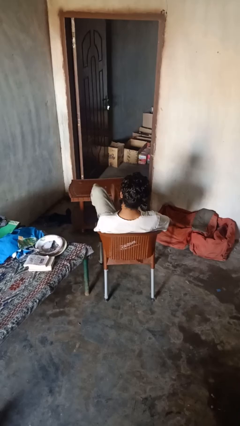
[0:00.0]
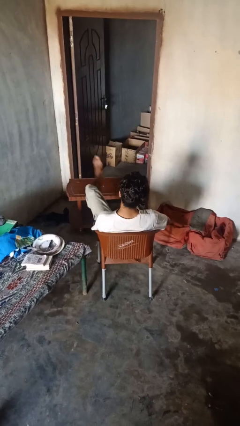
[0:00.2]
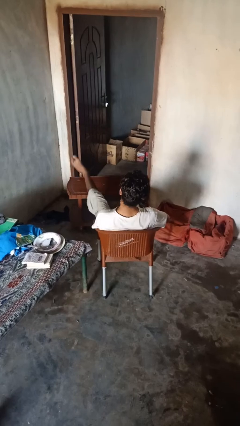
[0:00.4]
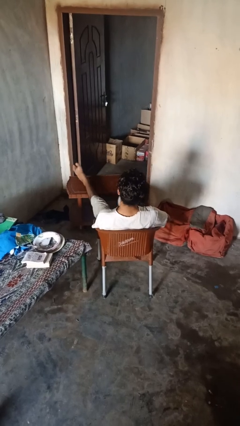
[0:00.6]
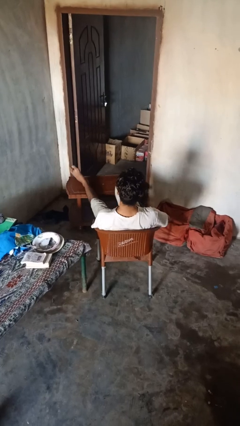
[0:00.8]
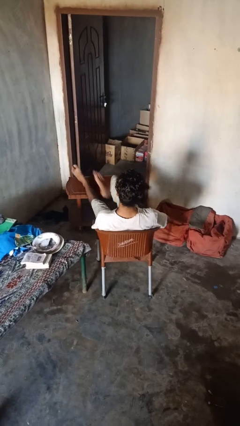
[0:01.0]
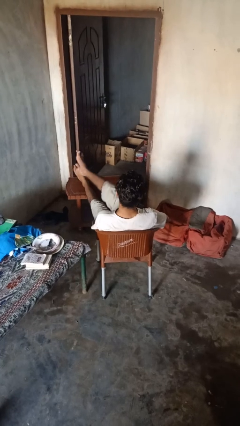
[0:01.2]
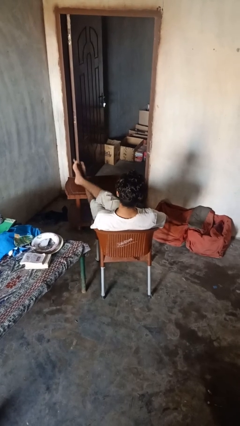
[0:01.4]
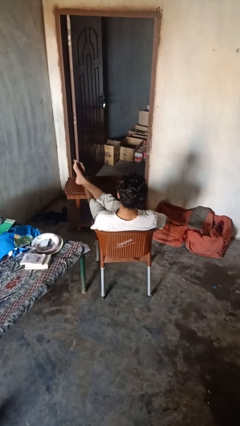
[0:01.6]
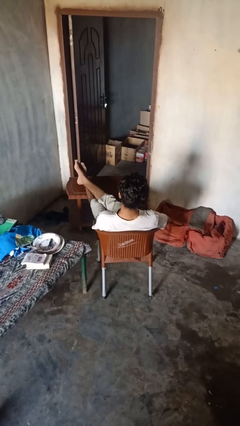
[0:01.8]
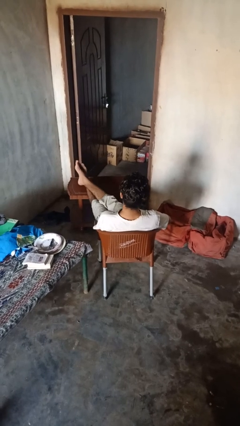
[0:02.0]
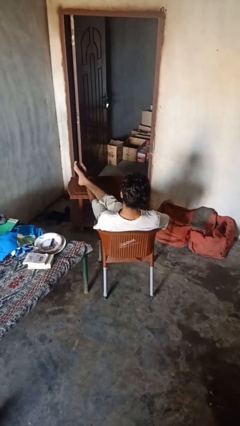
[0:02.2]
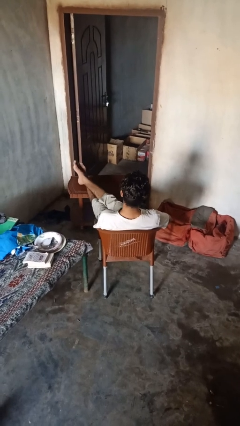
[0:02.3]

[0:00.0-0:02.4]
person puts feet up

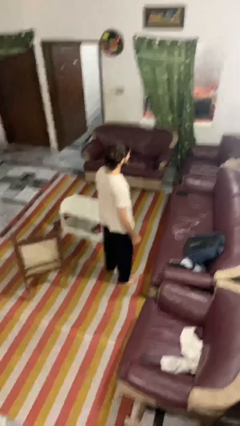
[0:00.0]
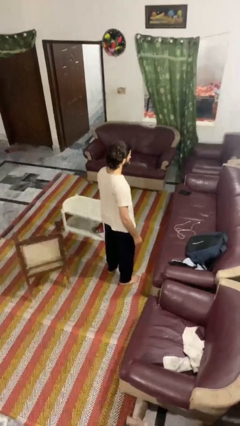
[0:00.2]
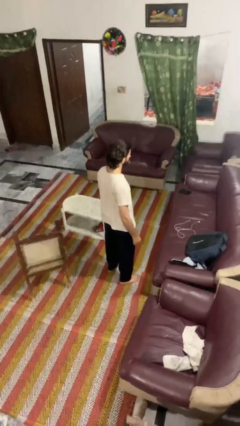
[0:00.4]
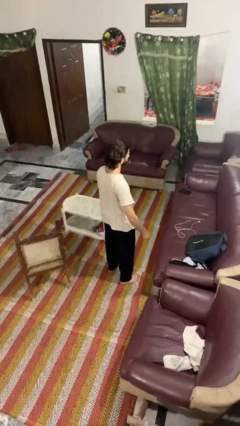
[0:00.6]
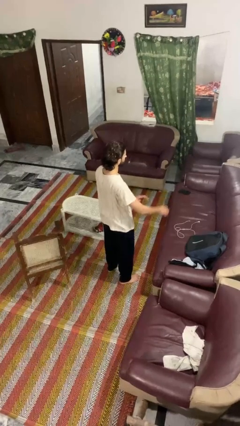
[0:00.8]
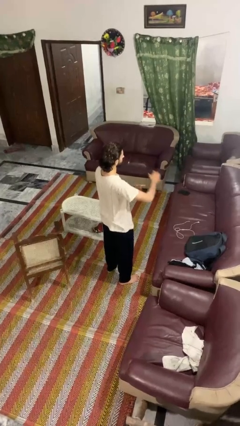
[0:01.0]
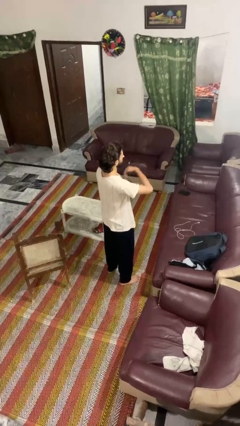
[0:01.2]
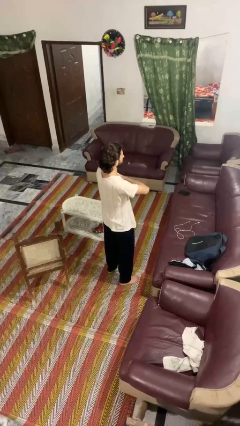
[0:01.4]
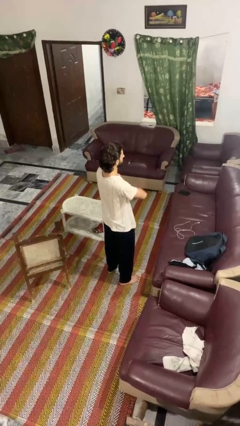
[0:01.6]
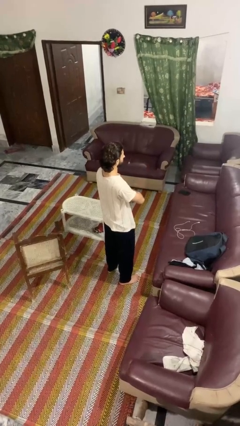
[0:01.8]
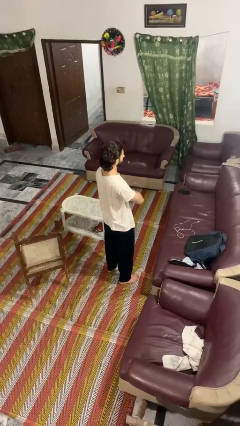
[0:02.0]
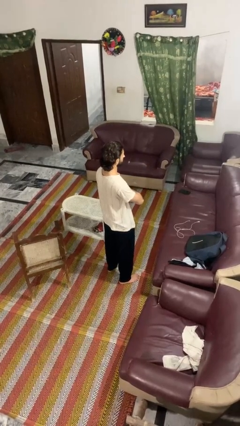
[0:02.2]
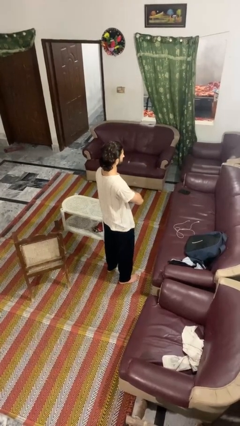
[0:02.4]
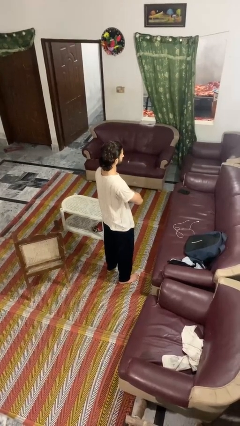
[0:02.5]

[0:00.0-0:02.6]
person crosses arms

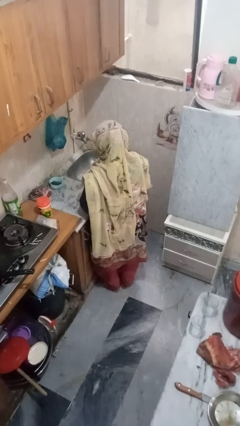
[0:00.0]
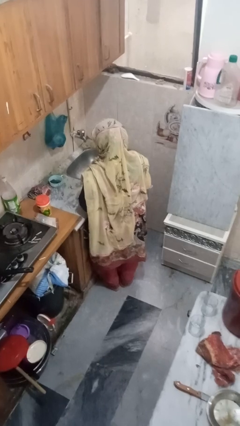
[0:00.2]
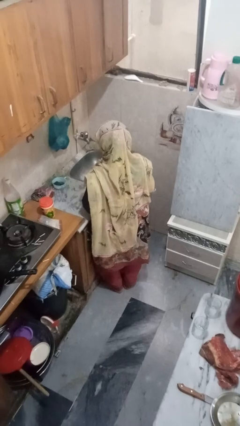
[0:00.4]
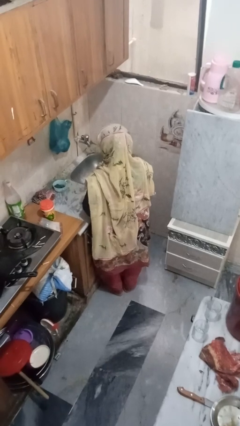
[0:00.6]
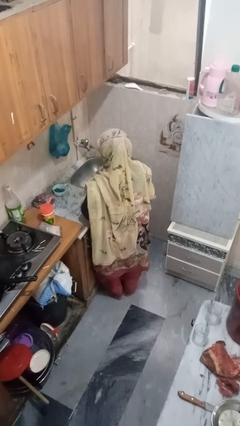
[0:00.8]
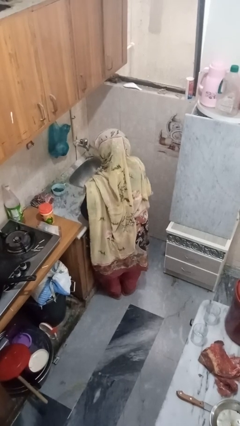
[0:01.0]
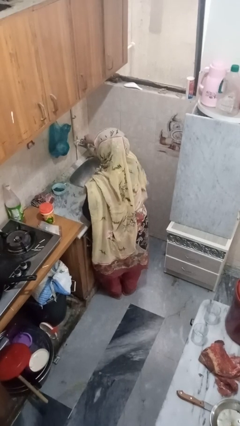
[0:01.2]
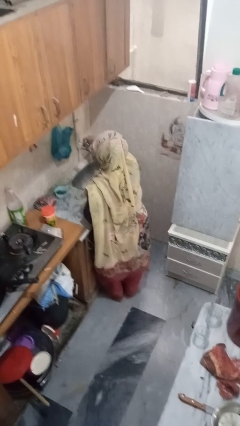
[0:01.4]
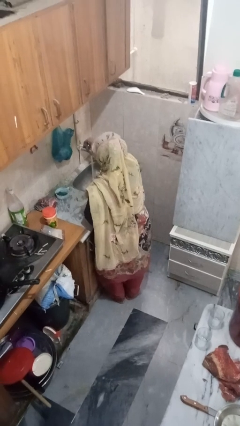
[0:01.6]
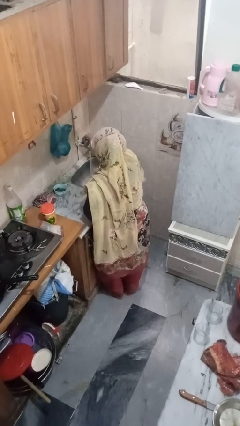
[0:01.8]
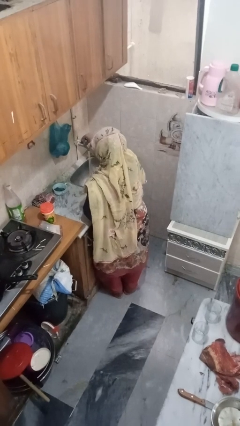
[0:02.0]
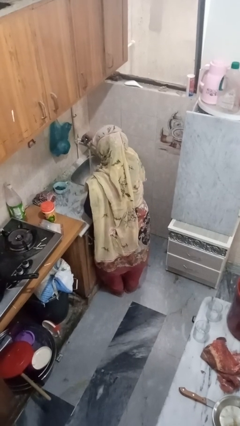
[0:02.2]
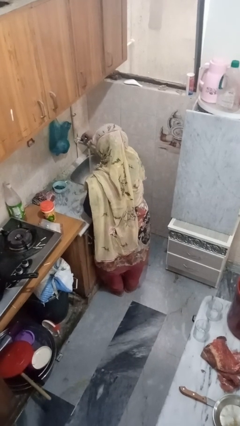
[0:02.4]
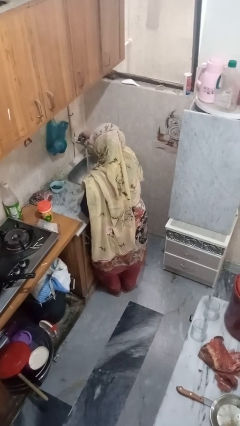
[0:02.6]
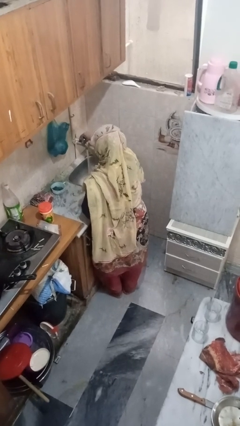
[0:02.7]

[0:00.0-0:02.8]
person turns on faucet

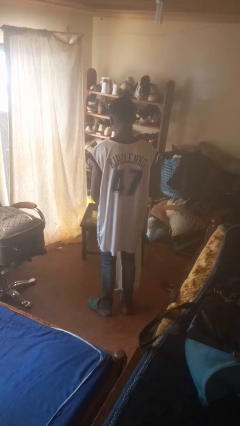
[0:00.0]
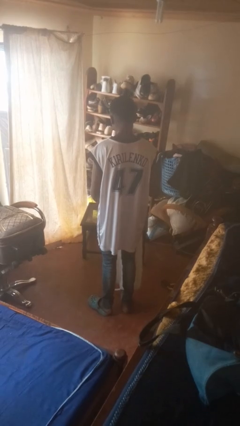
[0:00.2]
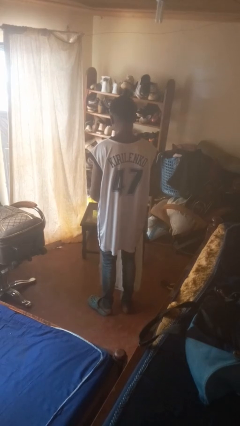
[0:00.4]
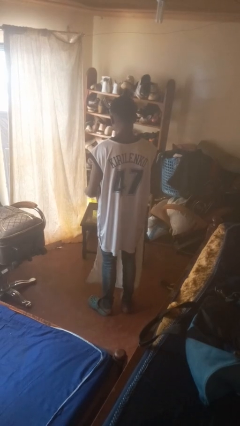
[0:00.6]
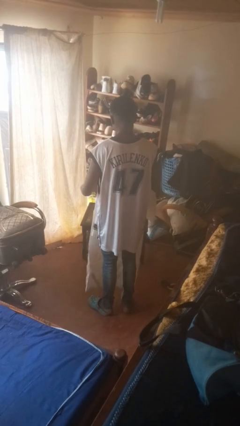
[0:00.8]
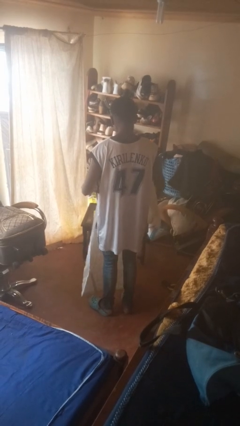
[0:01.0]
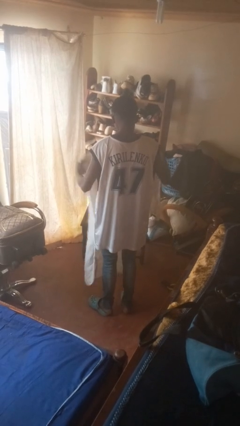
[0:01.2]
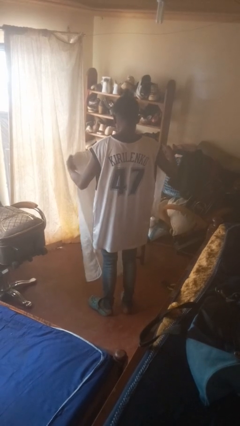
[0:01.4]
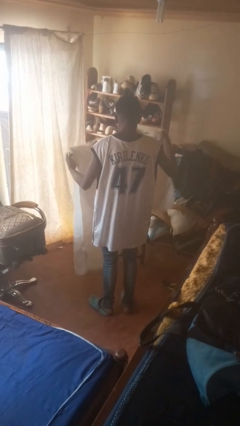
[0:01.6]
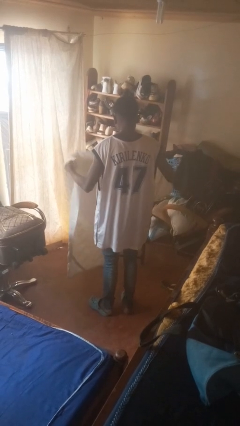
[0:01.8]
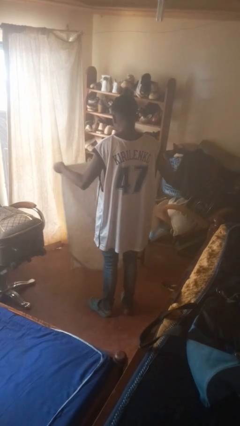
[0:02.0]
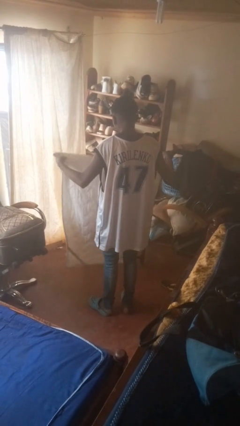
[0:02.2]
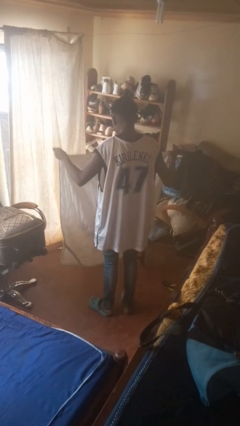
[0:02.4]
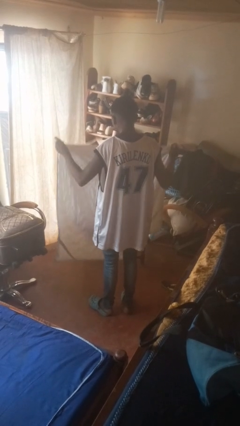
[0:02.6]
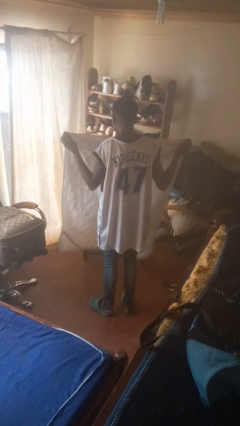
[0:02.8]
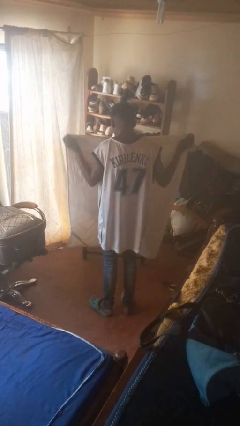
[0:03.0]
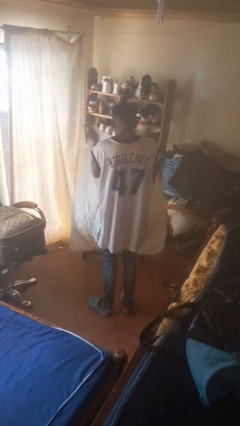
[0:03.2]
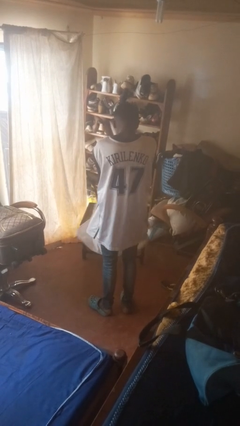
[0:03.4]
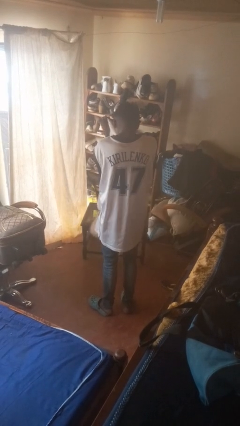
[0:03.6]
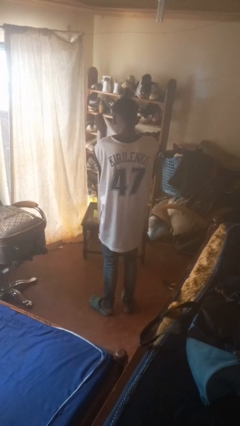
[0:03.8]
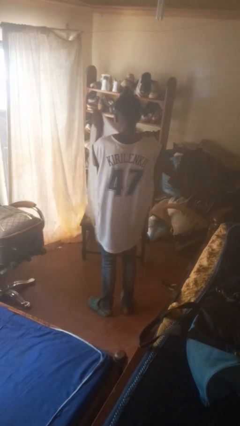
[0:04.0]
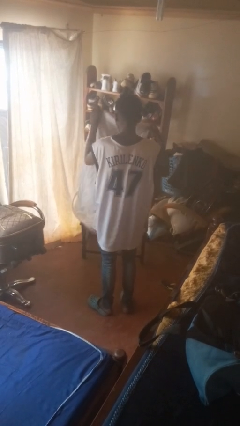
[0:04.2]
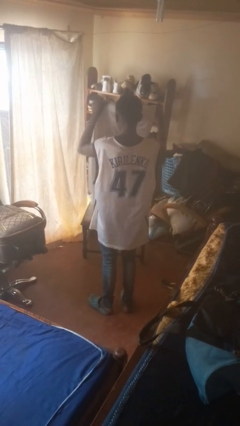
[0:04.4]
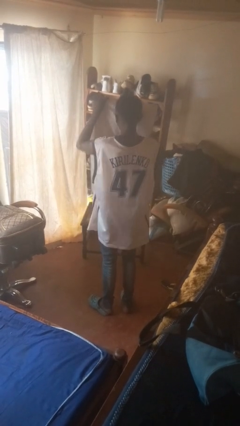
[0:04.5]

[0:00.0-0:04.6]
person folds blanket

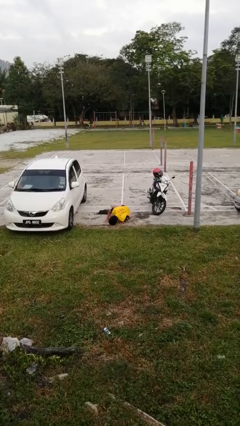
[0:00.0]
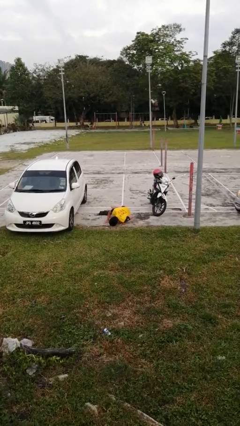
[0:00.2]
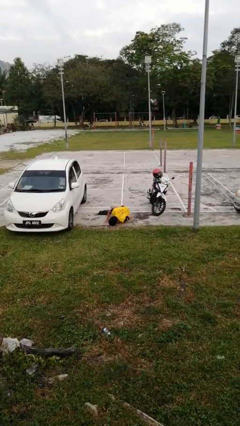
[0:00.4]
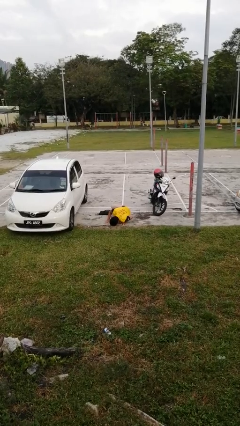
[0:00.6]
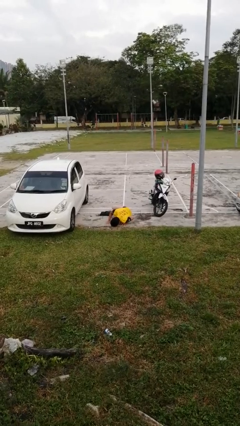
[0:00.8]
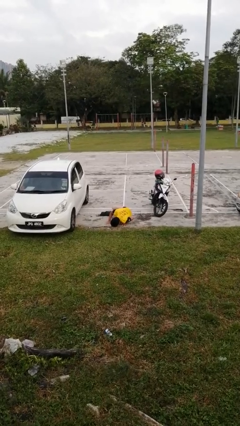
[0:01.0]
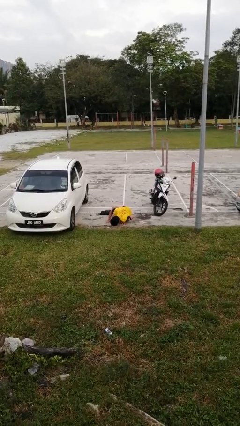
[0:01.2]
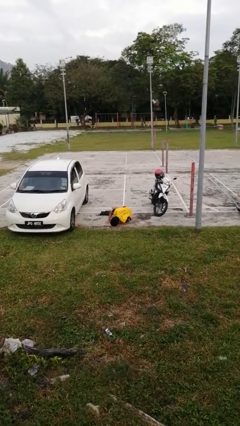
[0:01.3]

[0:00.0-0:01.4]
person lies down on floor

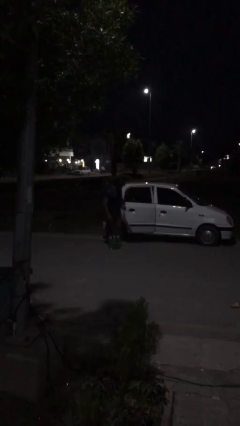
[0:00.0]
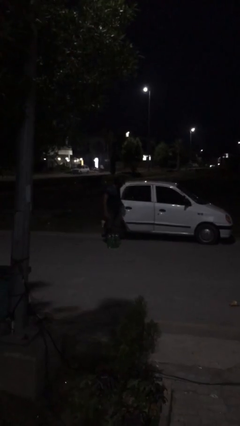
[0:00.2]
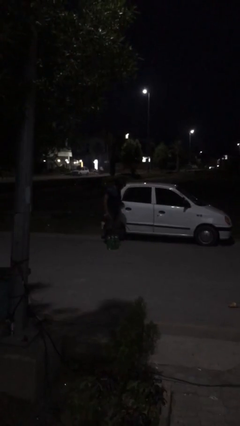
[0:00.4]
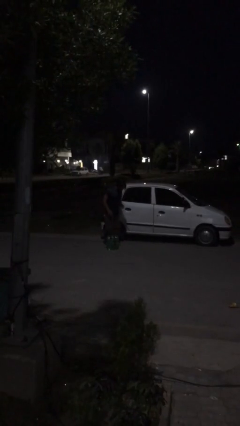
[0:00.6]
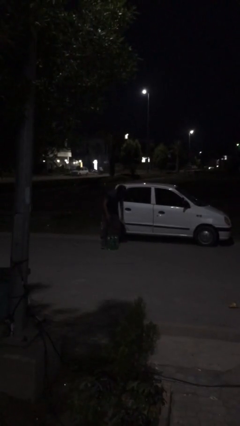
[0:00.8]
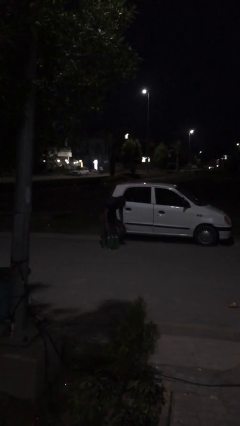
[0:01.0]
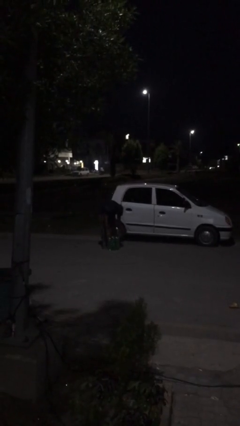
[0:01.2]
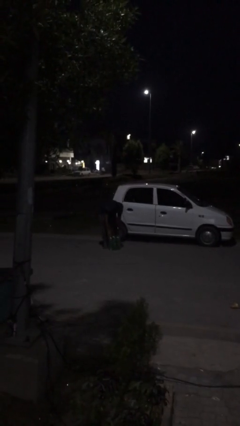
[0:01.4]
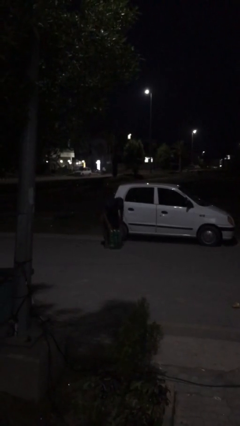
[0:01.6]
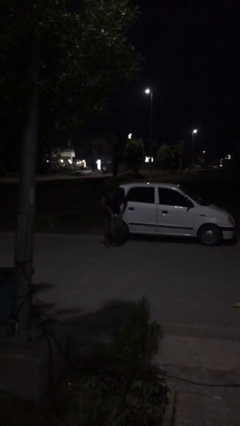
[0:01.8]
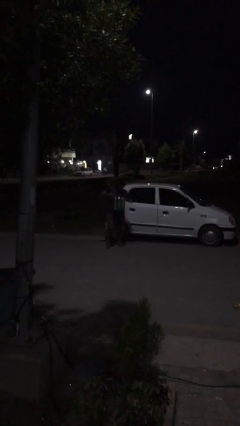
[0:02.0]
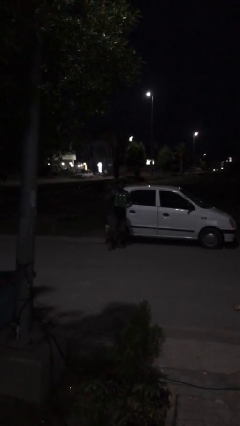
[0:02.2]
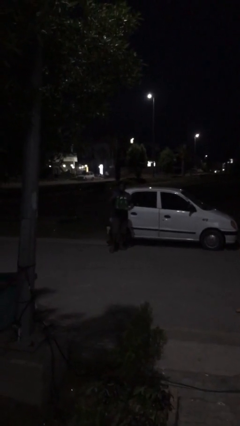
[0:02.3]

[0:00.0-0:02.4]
person closes car door

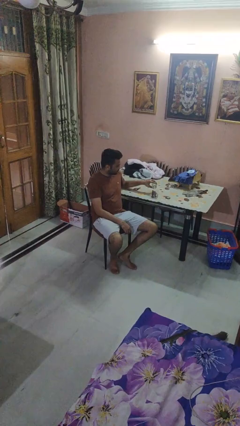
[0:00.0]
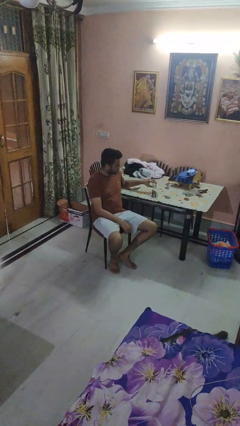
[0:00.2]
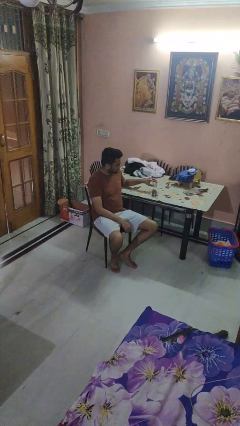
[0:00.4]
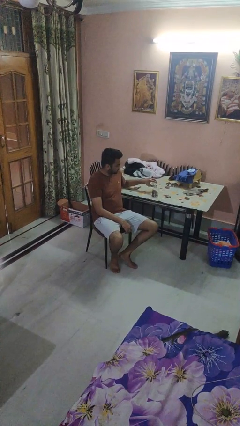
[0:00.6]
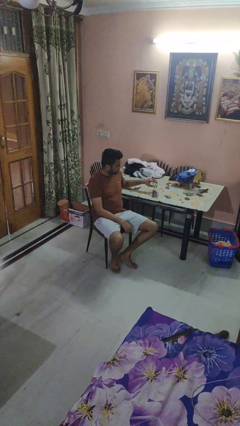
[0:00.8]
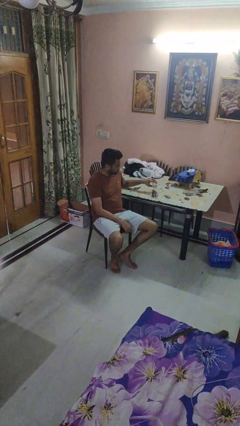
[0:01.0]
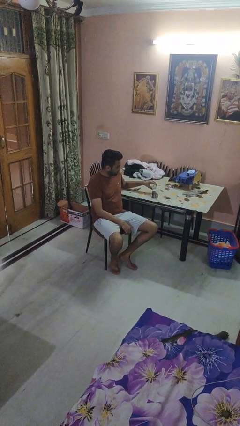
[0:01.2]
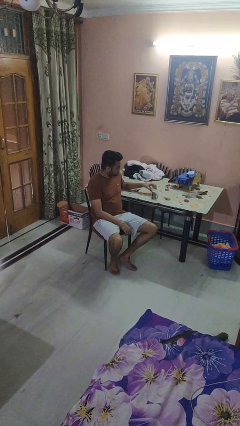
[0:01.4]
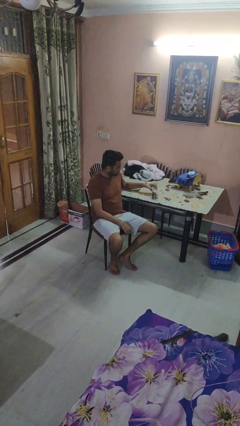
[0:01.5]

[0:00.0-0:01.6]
person pours liquid into cup
